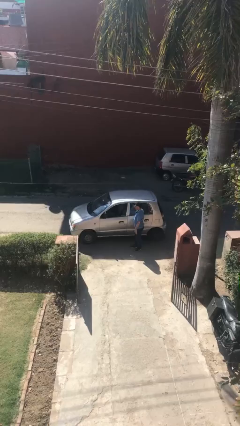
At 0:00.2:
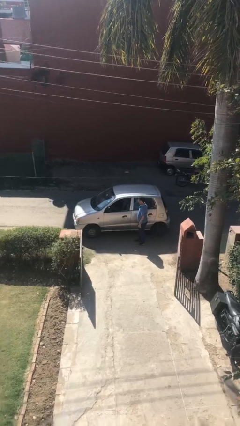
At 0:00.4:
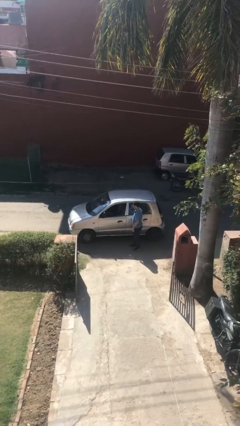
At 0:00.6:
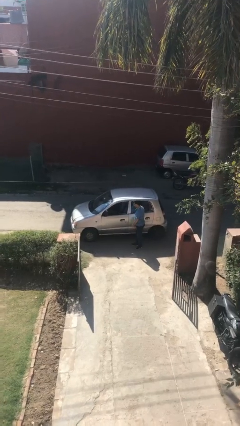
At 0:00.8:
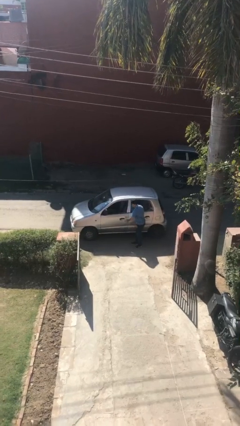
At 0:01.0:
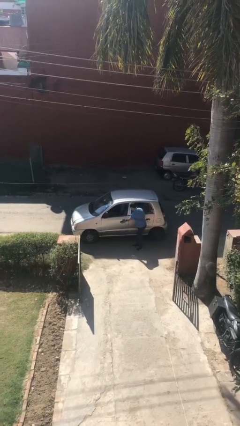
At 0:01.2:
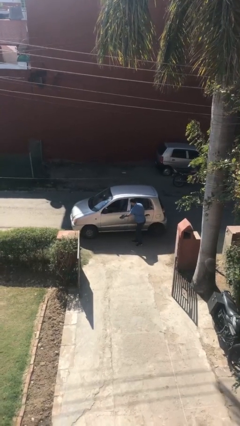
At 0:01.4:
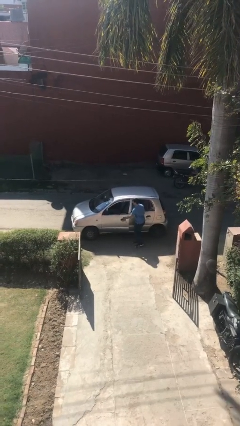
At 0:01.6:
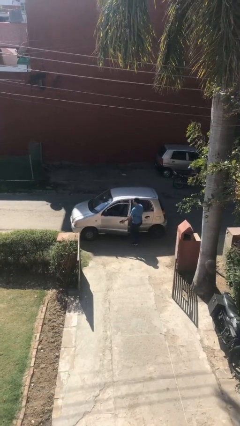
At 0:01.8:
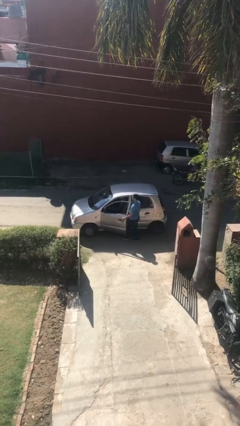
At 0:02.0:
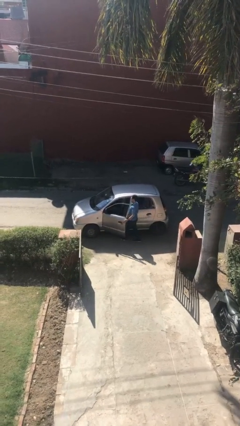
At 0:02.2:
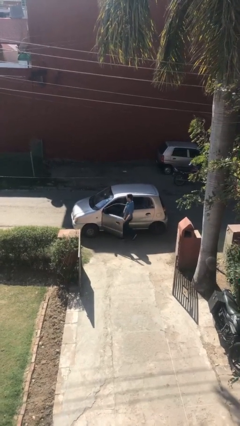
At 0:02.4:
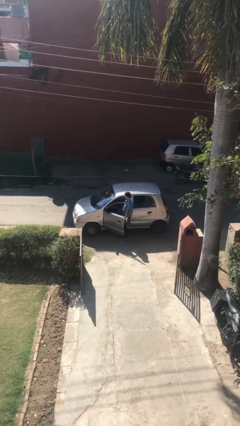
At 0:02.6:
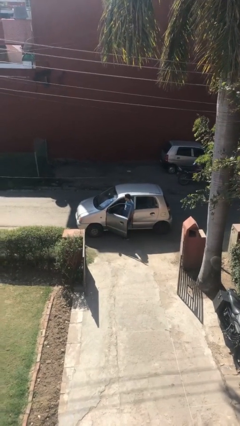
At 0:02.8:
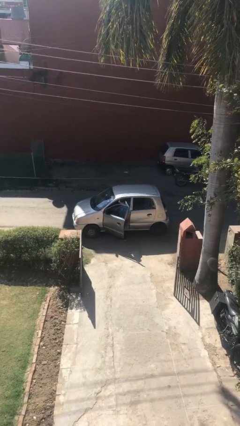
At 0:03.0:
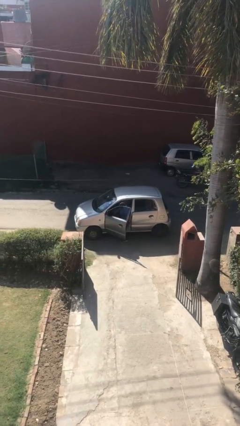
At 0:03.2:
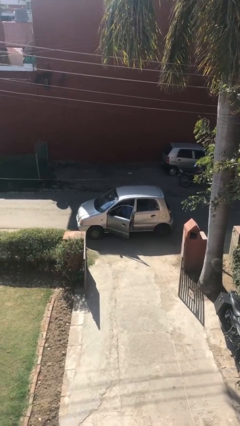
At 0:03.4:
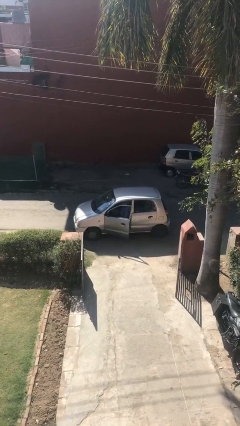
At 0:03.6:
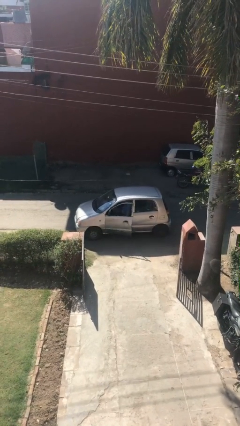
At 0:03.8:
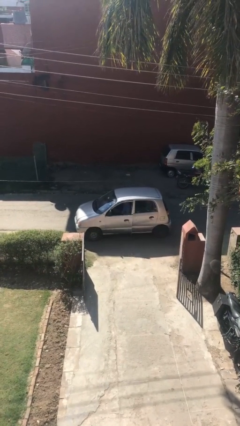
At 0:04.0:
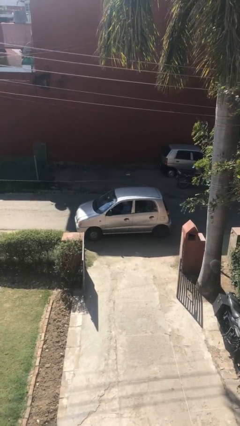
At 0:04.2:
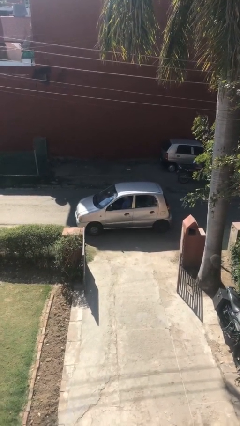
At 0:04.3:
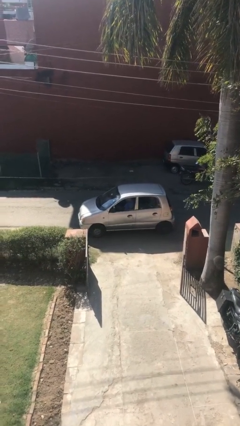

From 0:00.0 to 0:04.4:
car picks up person

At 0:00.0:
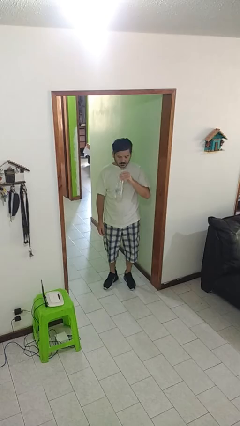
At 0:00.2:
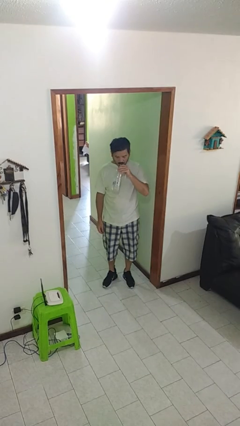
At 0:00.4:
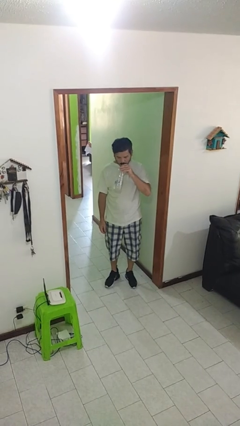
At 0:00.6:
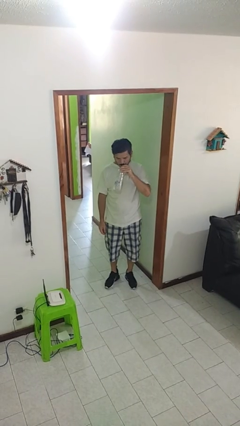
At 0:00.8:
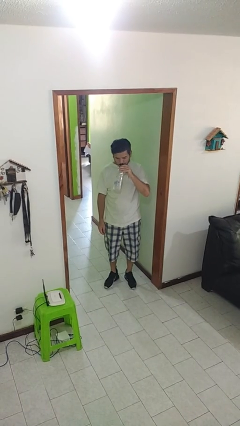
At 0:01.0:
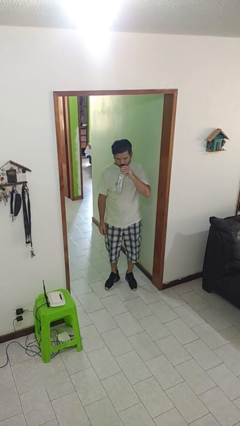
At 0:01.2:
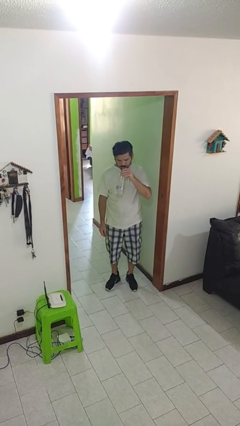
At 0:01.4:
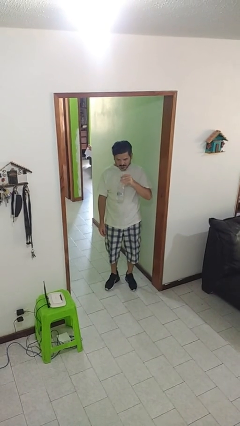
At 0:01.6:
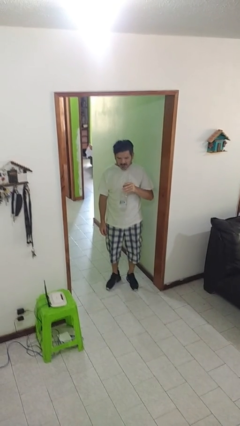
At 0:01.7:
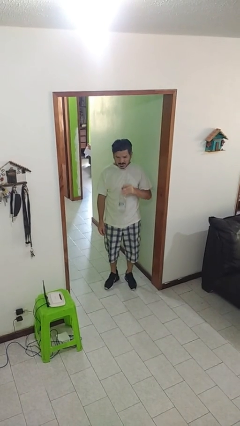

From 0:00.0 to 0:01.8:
person drinks from straw

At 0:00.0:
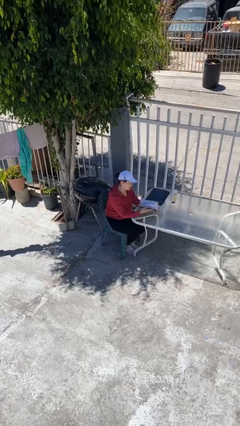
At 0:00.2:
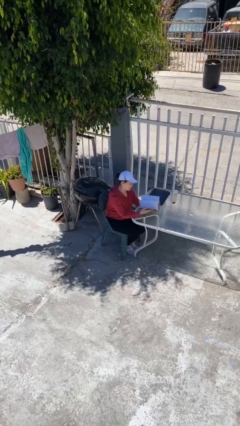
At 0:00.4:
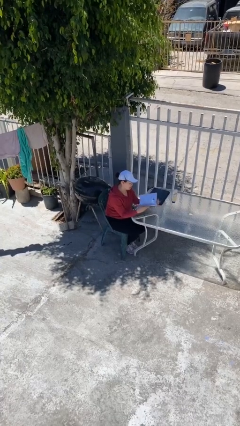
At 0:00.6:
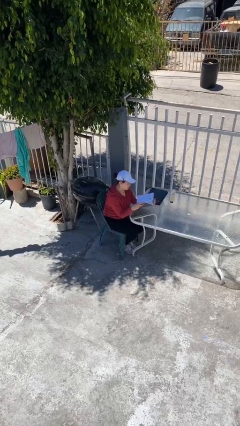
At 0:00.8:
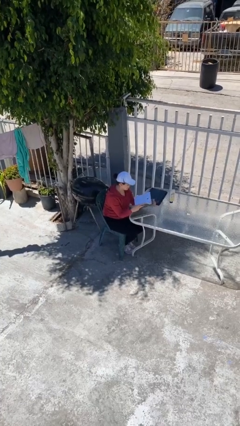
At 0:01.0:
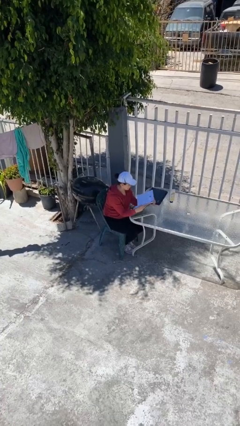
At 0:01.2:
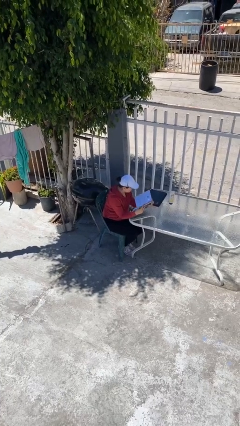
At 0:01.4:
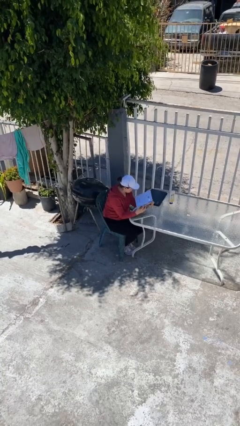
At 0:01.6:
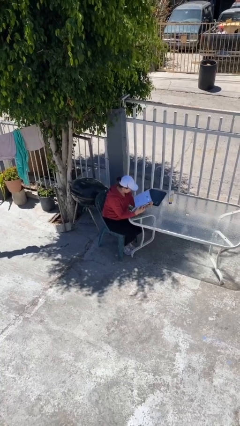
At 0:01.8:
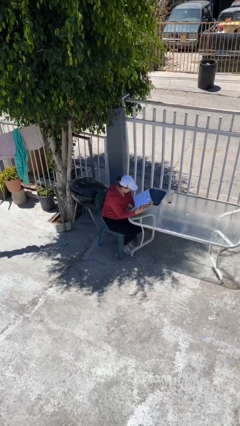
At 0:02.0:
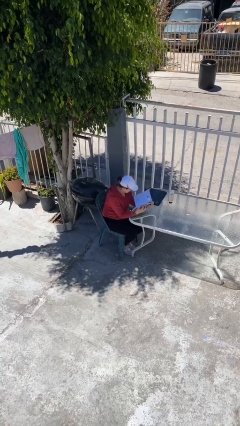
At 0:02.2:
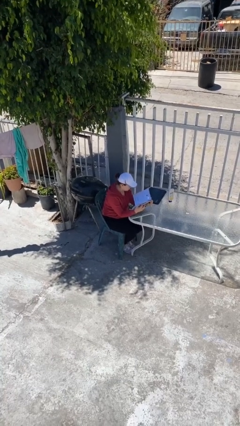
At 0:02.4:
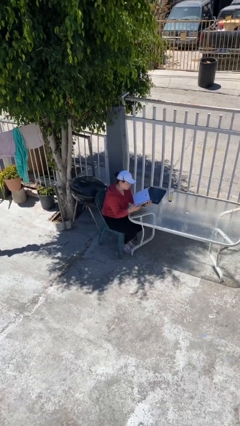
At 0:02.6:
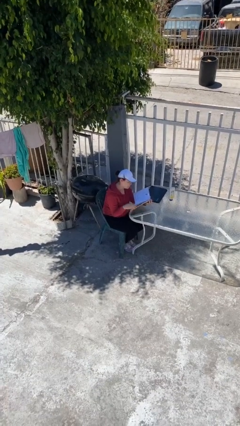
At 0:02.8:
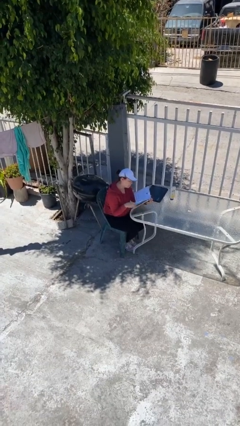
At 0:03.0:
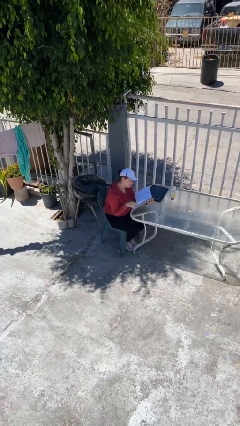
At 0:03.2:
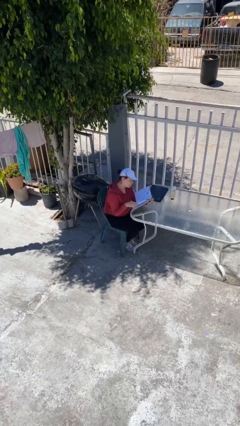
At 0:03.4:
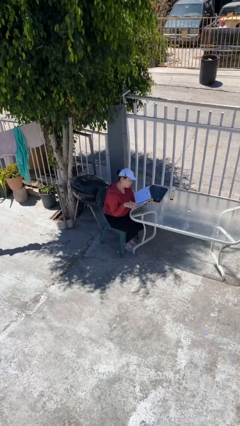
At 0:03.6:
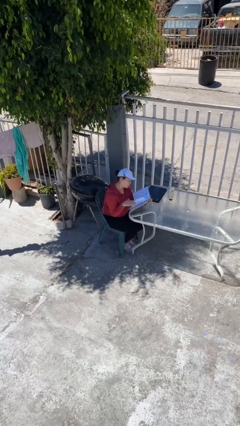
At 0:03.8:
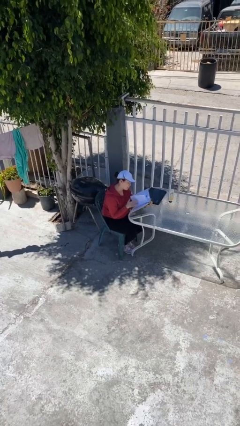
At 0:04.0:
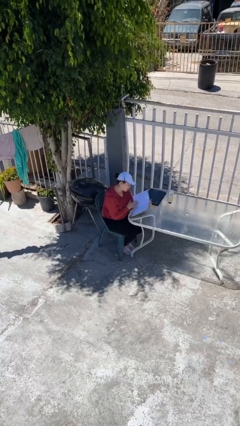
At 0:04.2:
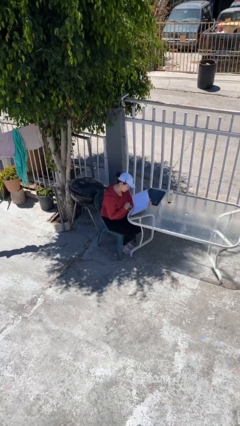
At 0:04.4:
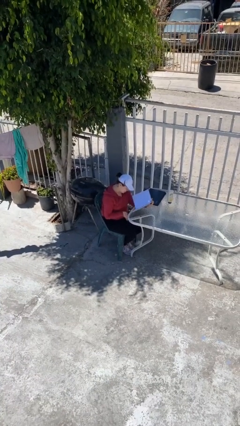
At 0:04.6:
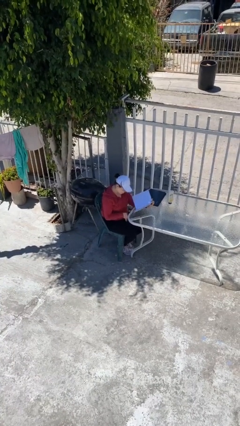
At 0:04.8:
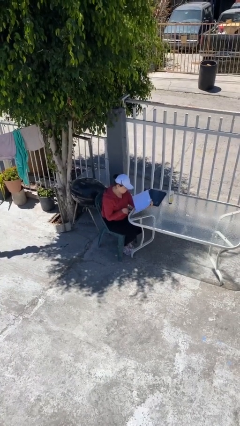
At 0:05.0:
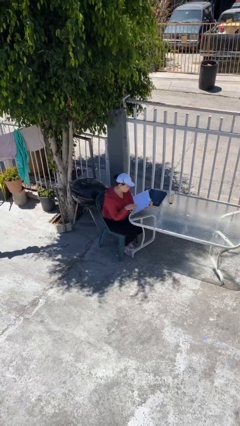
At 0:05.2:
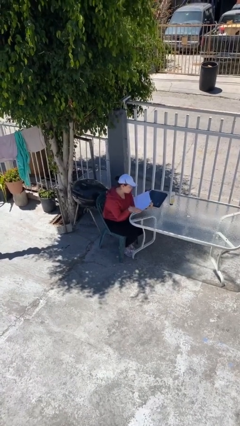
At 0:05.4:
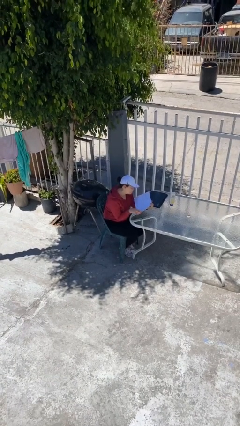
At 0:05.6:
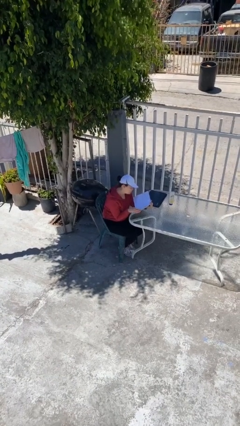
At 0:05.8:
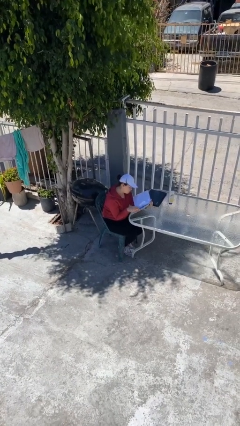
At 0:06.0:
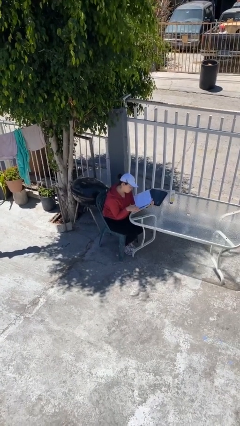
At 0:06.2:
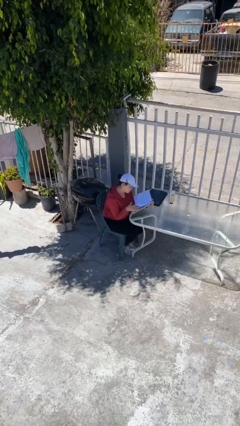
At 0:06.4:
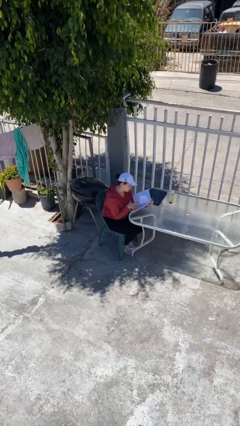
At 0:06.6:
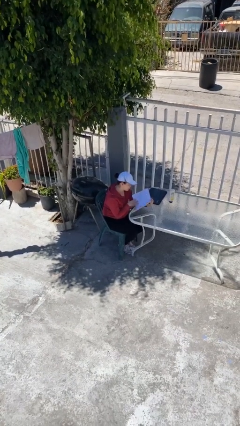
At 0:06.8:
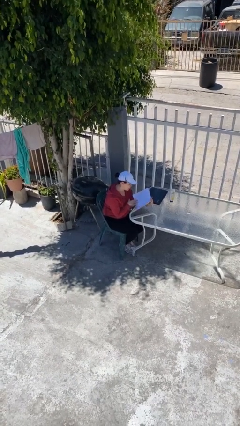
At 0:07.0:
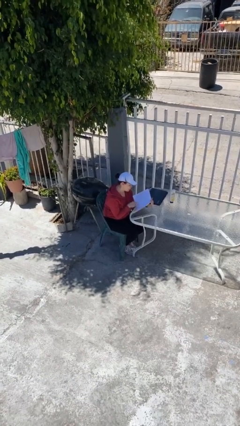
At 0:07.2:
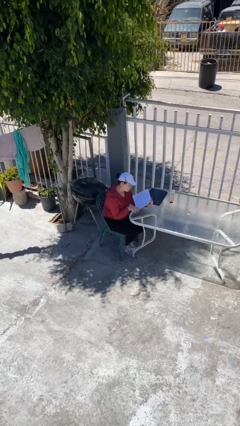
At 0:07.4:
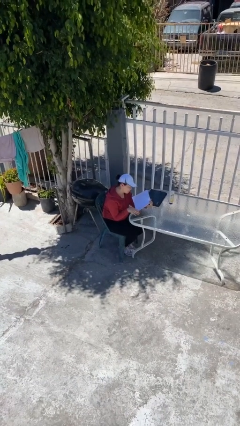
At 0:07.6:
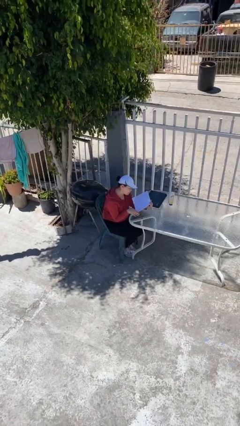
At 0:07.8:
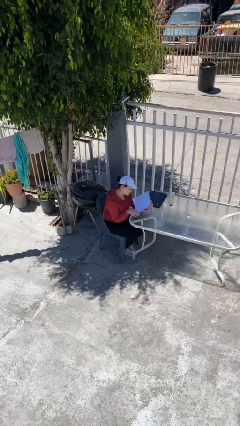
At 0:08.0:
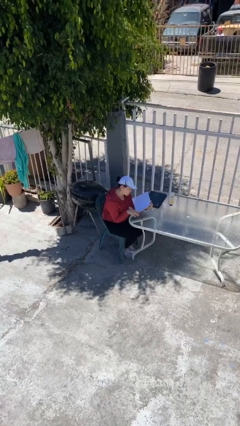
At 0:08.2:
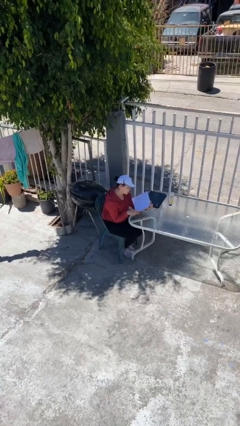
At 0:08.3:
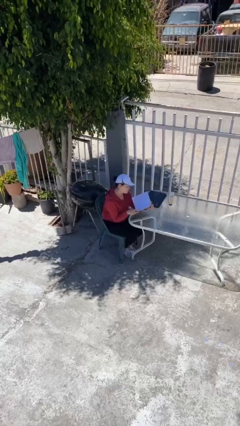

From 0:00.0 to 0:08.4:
person reads document

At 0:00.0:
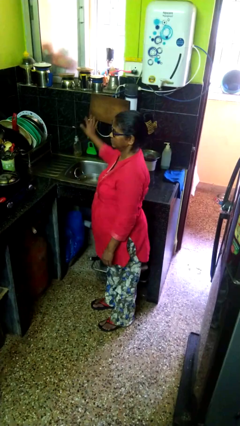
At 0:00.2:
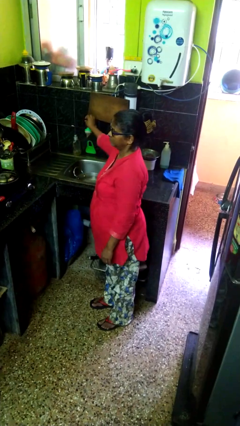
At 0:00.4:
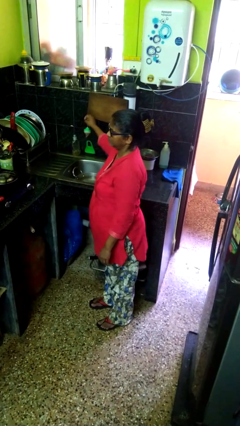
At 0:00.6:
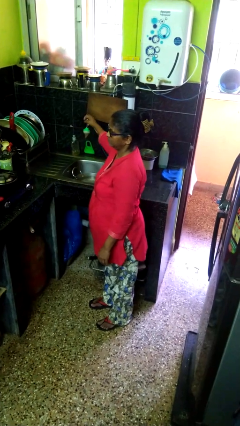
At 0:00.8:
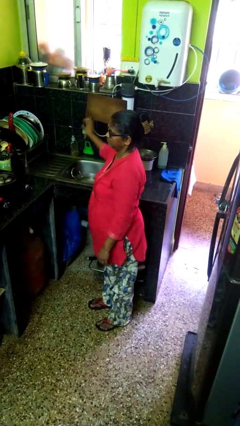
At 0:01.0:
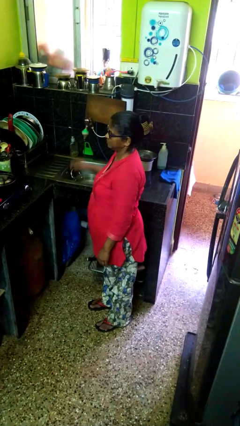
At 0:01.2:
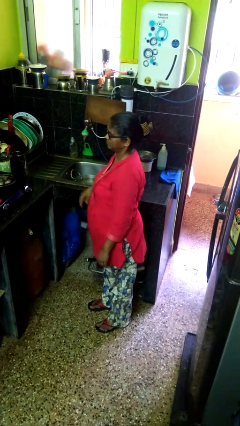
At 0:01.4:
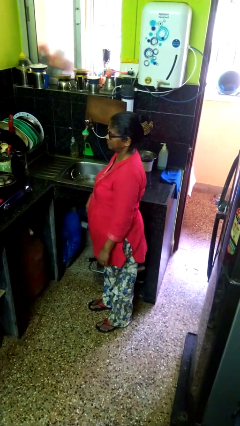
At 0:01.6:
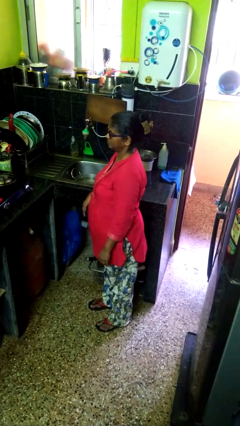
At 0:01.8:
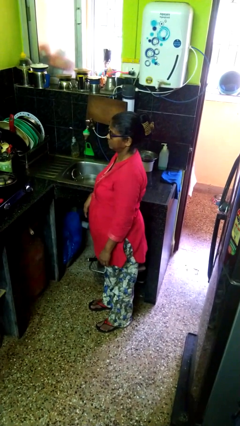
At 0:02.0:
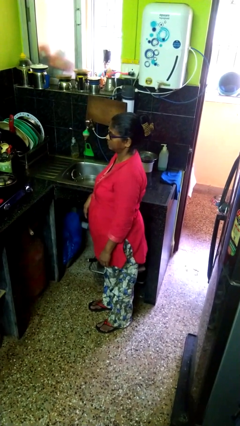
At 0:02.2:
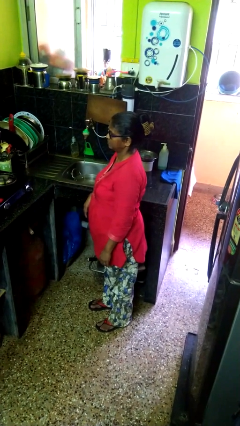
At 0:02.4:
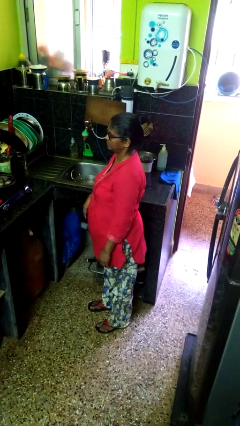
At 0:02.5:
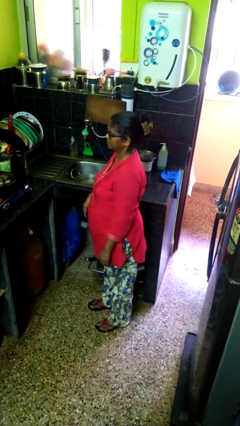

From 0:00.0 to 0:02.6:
person turns on faucet

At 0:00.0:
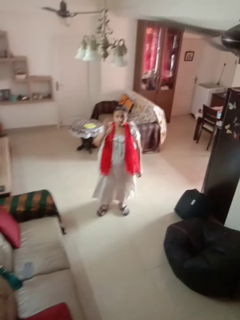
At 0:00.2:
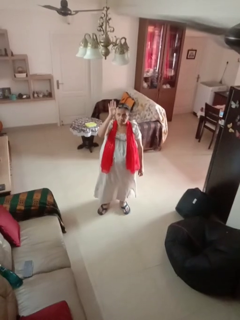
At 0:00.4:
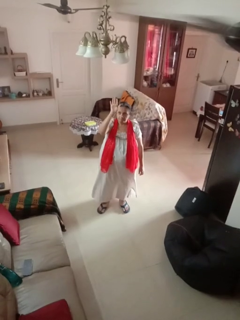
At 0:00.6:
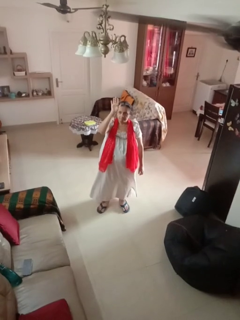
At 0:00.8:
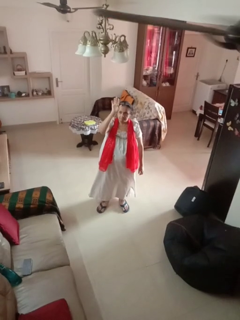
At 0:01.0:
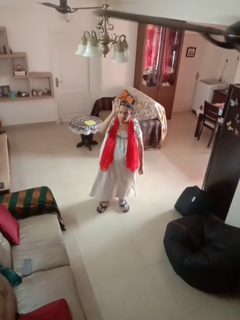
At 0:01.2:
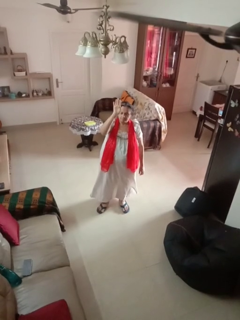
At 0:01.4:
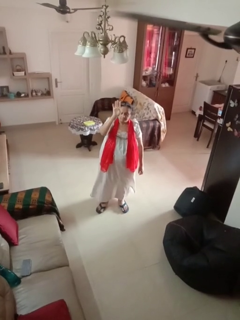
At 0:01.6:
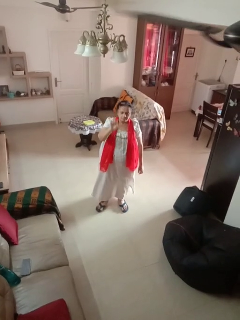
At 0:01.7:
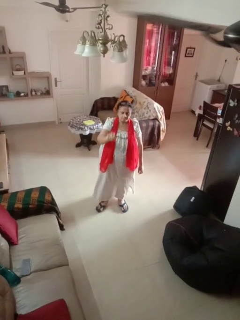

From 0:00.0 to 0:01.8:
person gestures raise hand
